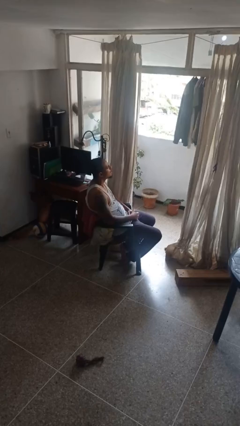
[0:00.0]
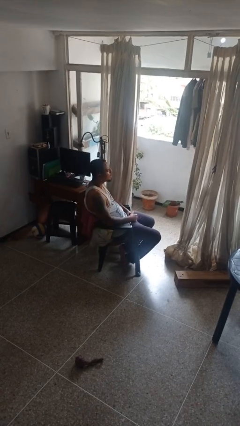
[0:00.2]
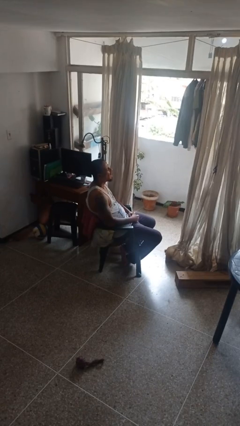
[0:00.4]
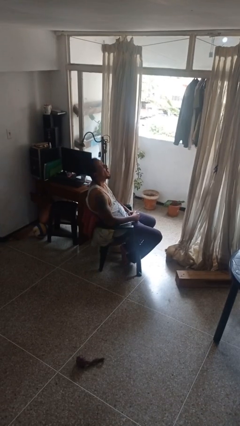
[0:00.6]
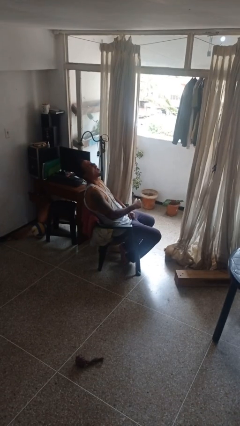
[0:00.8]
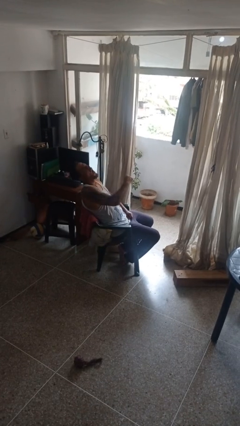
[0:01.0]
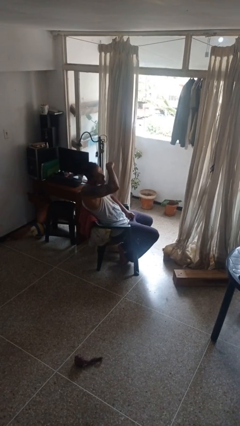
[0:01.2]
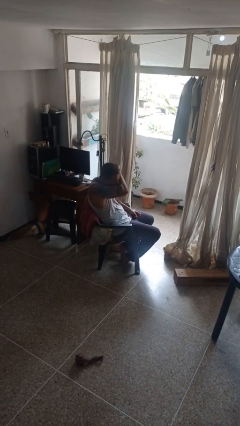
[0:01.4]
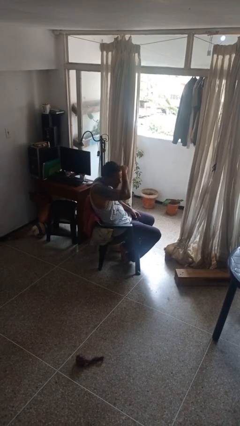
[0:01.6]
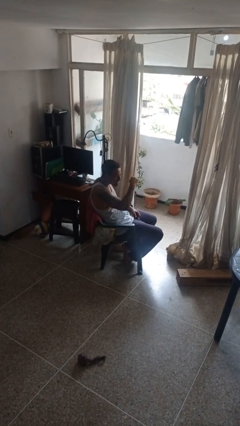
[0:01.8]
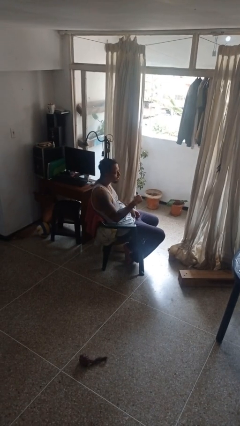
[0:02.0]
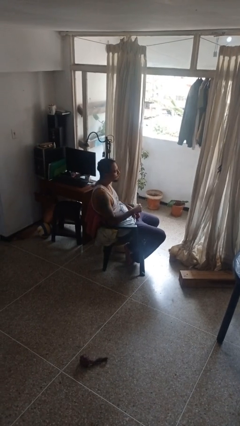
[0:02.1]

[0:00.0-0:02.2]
person sneezes into arm

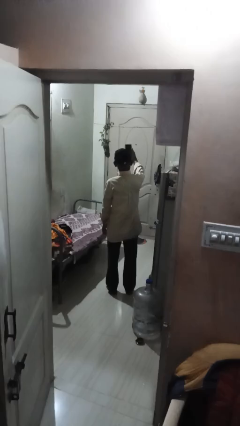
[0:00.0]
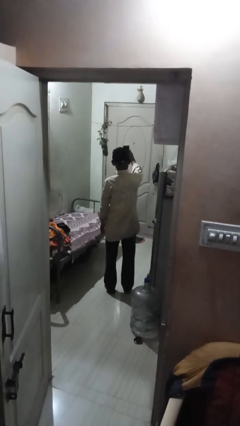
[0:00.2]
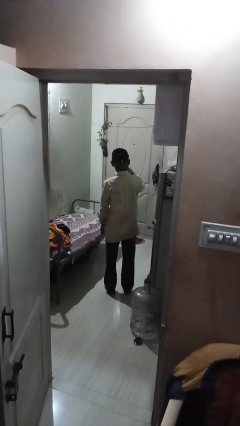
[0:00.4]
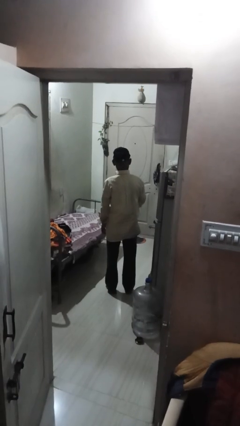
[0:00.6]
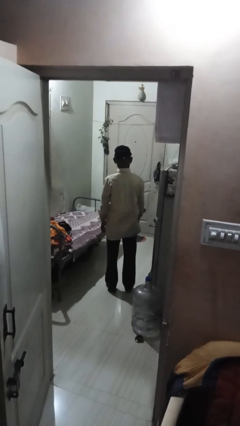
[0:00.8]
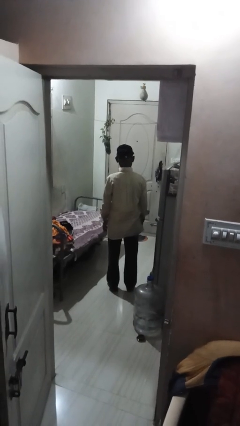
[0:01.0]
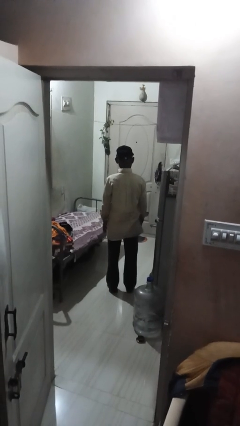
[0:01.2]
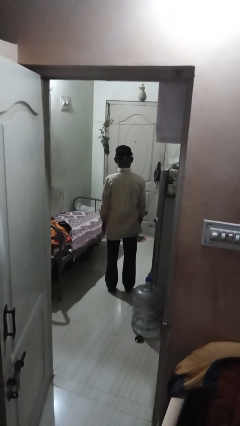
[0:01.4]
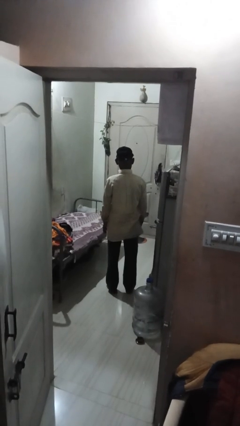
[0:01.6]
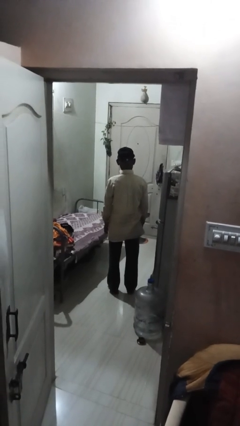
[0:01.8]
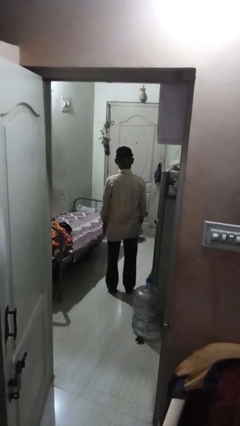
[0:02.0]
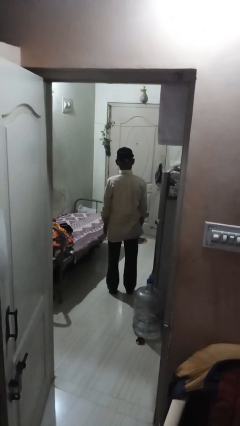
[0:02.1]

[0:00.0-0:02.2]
person takes selfie

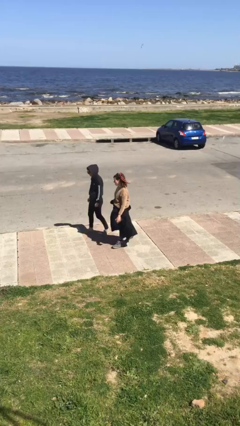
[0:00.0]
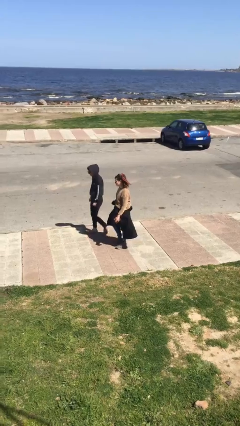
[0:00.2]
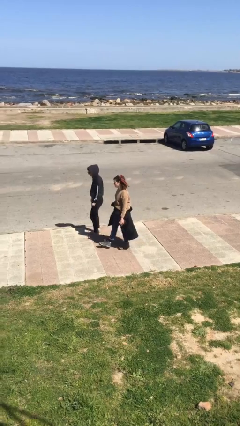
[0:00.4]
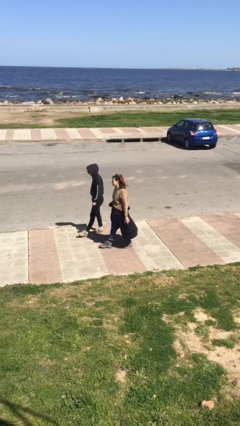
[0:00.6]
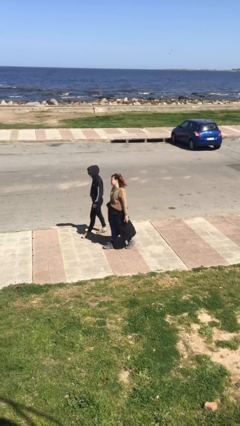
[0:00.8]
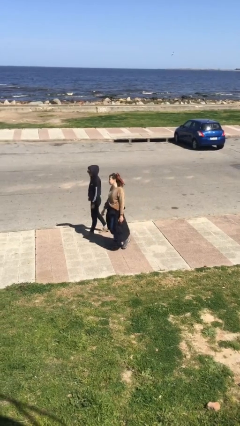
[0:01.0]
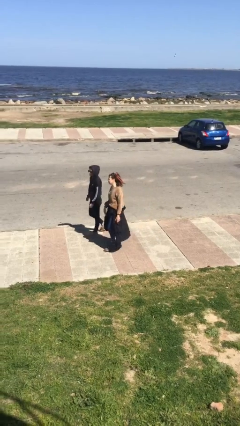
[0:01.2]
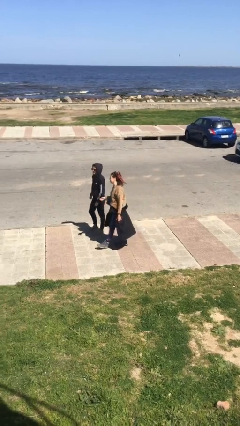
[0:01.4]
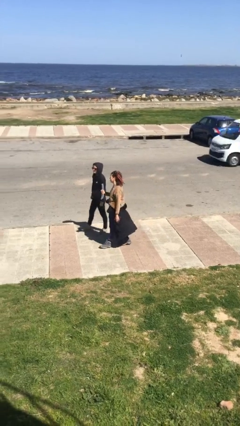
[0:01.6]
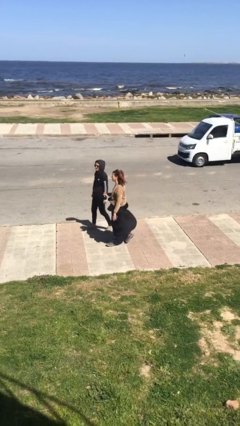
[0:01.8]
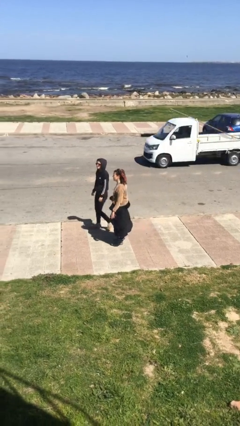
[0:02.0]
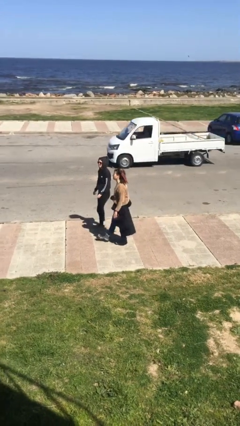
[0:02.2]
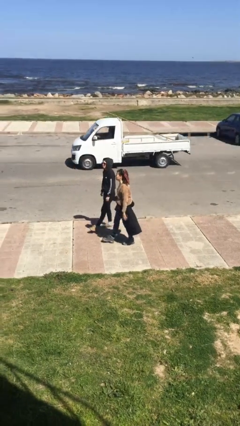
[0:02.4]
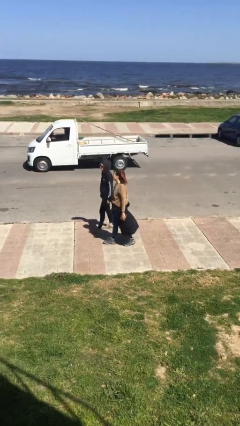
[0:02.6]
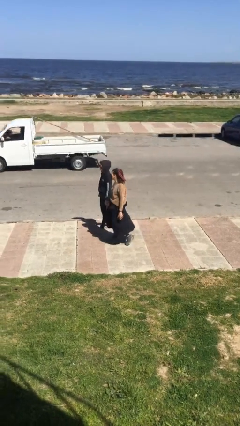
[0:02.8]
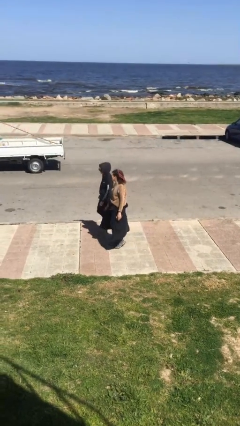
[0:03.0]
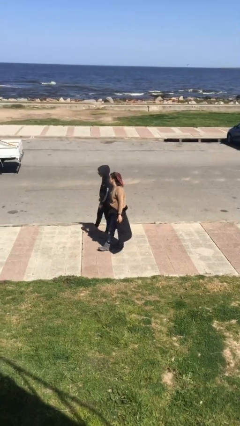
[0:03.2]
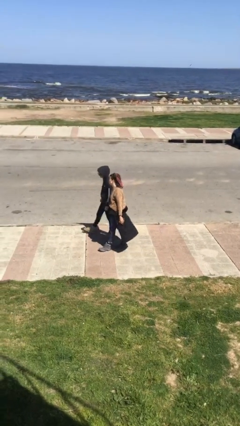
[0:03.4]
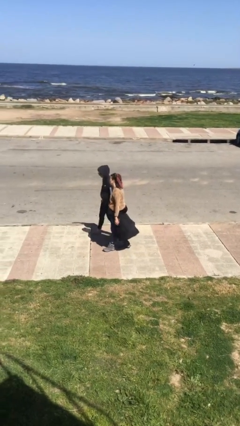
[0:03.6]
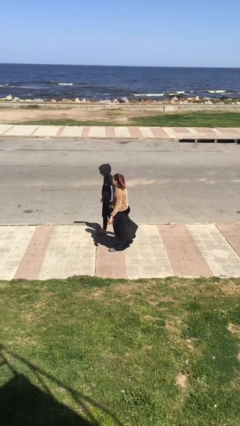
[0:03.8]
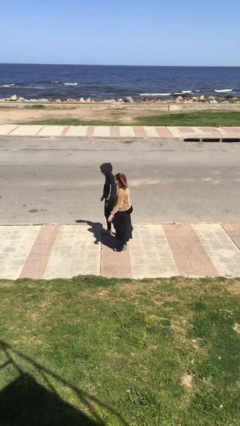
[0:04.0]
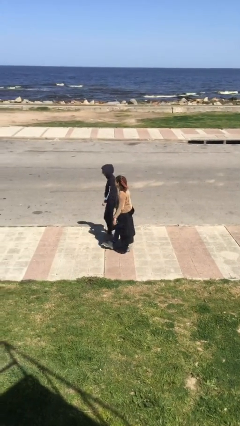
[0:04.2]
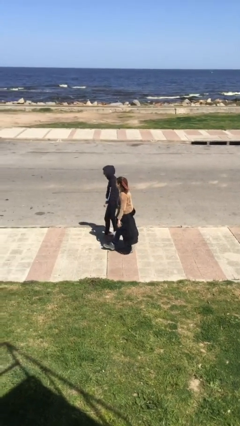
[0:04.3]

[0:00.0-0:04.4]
person talks to person

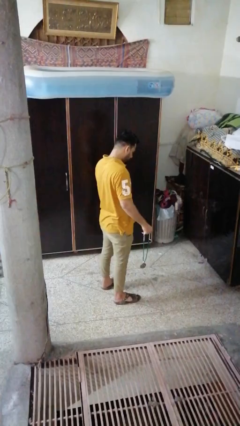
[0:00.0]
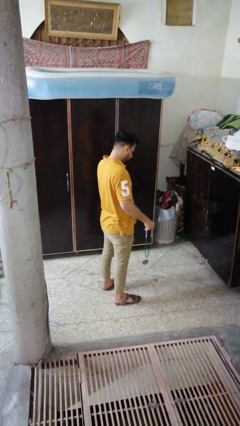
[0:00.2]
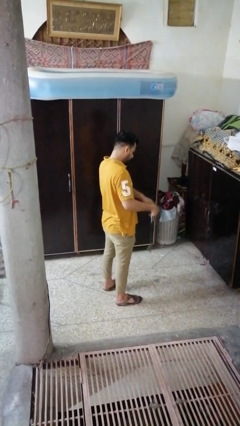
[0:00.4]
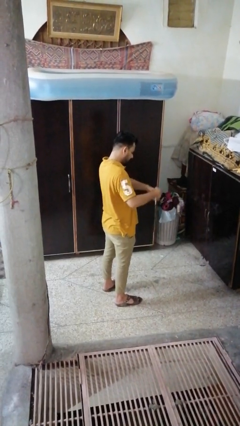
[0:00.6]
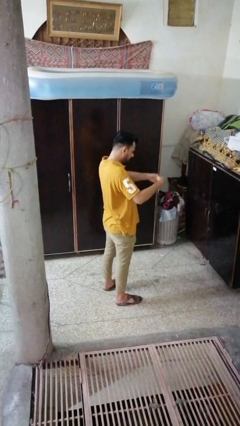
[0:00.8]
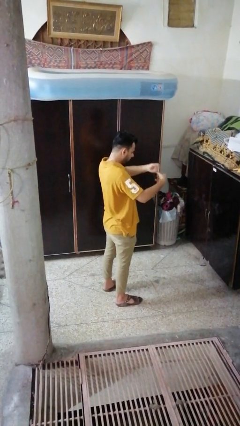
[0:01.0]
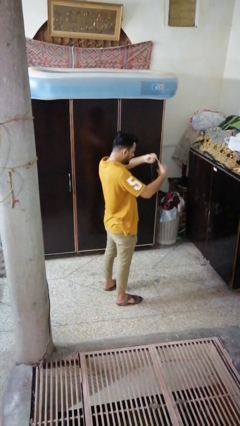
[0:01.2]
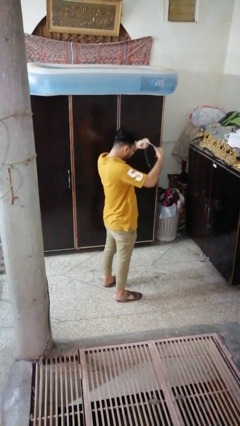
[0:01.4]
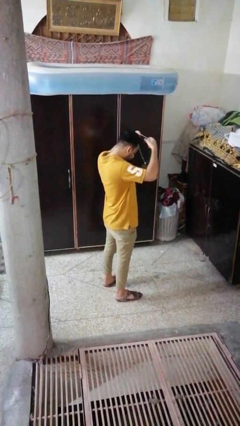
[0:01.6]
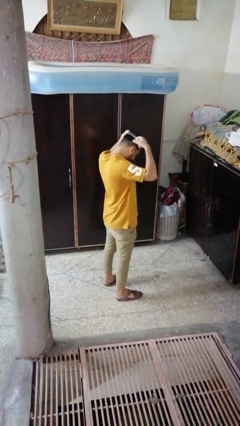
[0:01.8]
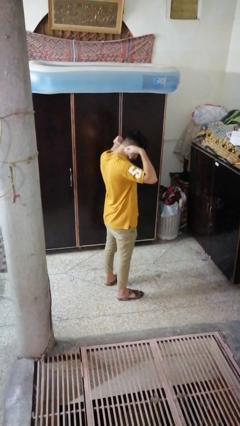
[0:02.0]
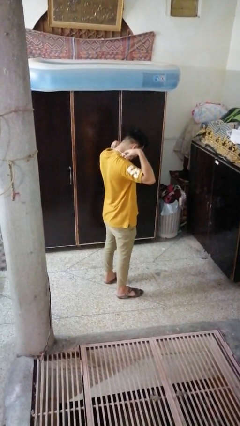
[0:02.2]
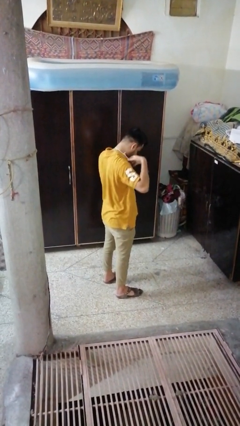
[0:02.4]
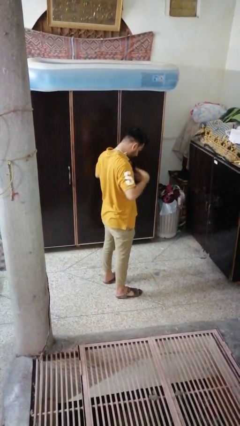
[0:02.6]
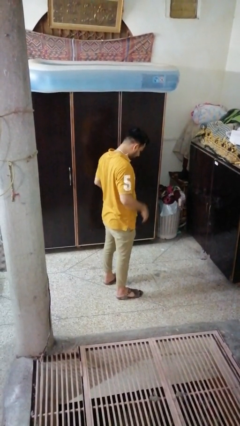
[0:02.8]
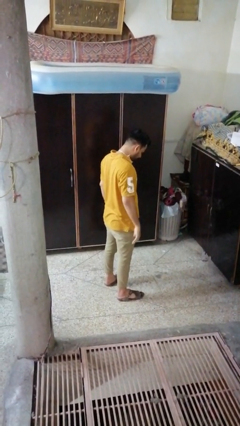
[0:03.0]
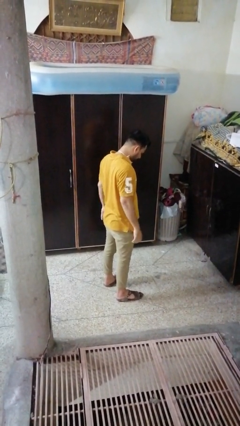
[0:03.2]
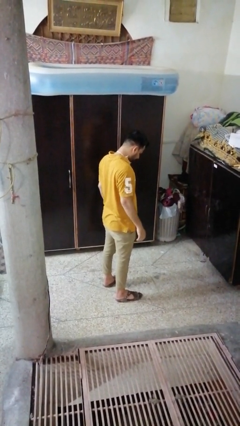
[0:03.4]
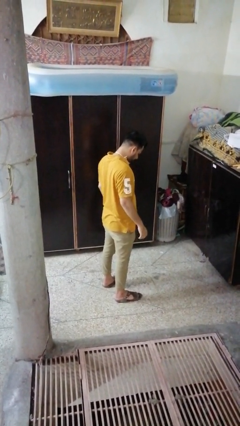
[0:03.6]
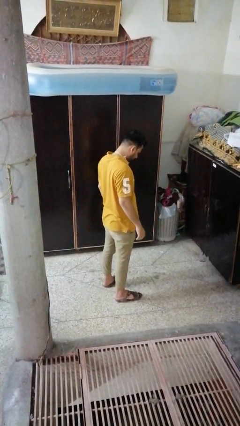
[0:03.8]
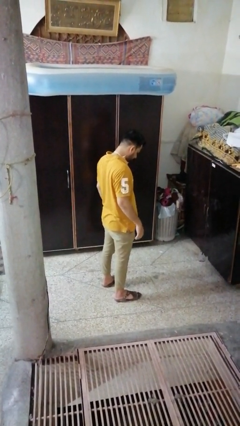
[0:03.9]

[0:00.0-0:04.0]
person puts on necklace

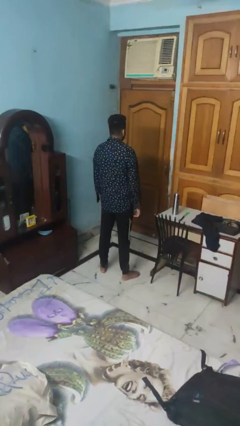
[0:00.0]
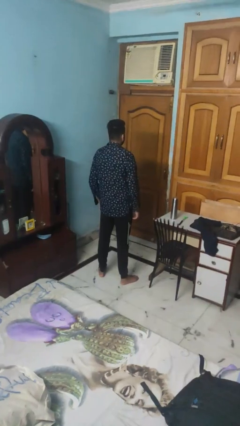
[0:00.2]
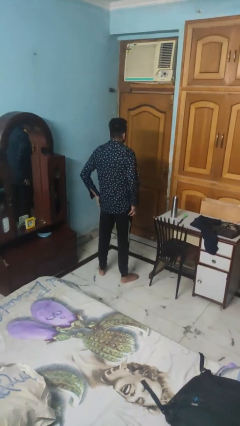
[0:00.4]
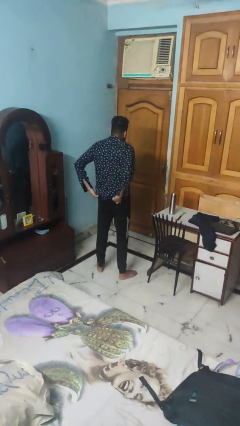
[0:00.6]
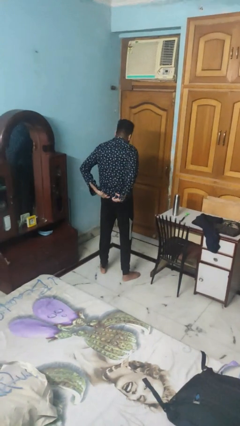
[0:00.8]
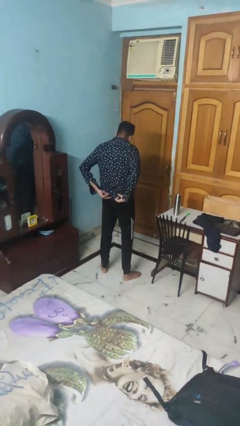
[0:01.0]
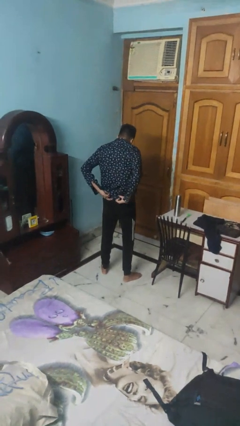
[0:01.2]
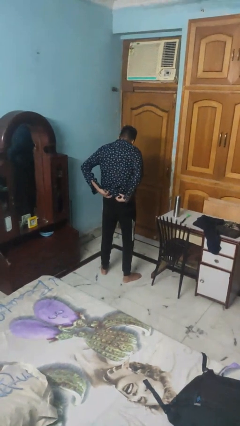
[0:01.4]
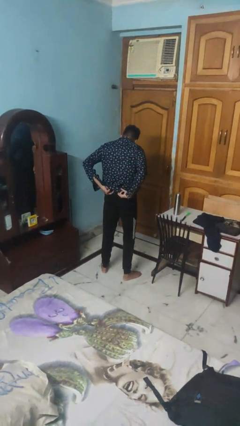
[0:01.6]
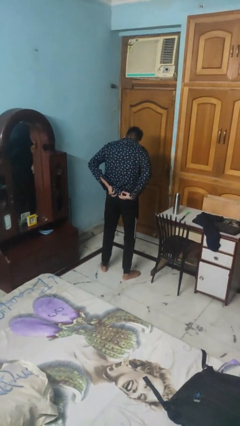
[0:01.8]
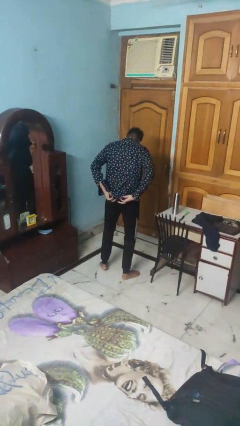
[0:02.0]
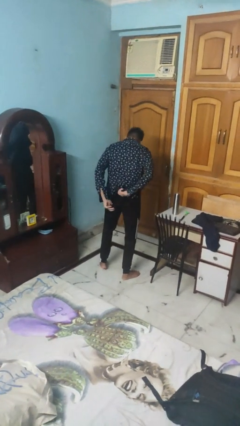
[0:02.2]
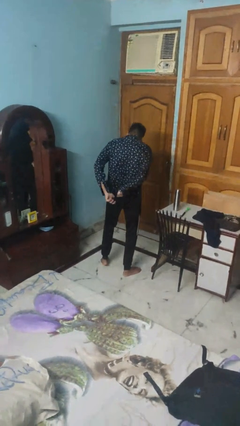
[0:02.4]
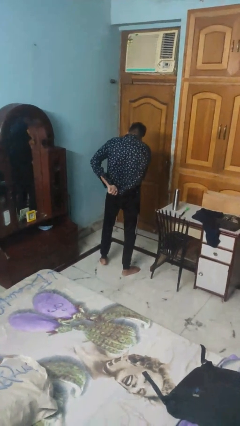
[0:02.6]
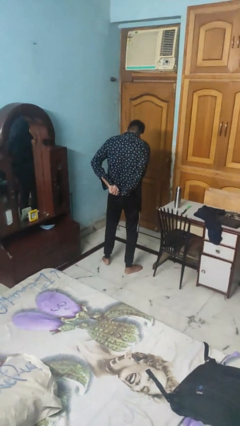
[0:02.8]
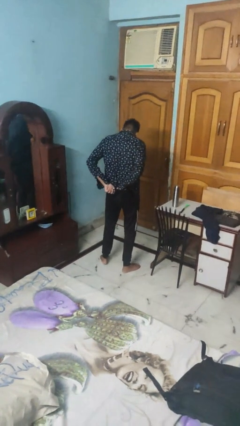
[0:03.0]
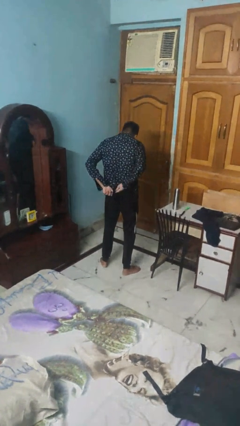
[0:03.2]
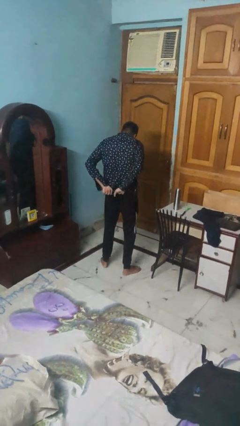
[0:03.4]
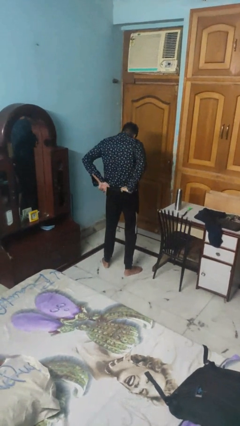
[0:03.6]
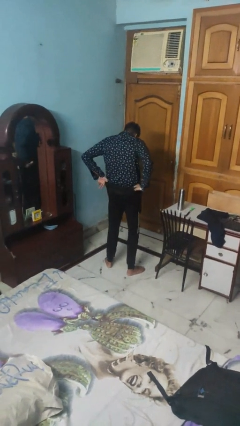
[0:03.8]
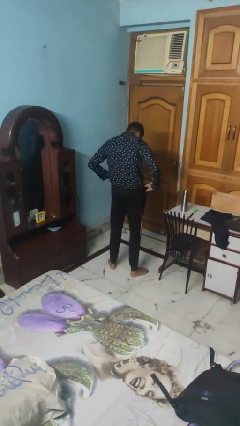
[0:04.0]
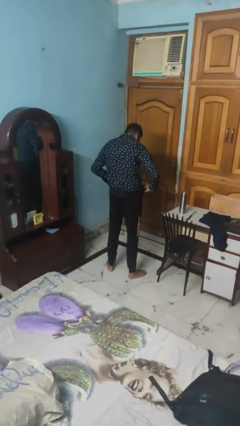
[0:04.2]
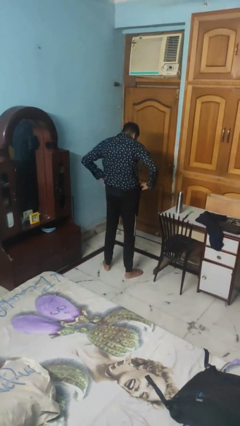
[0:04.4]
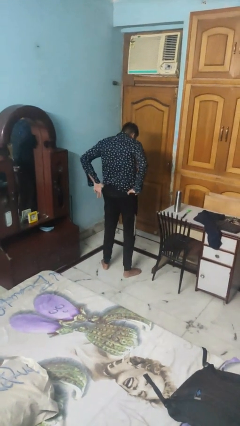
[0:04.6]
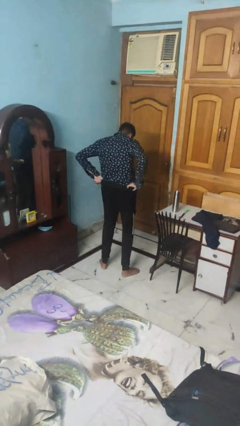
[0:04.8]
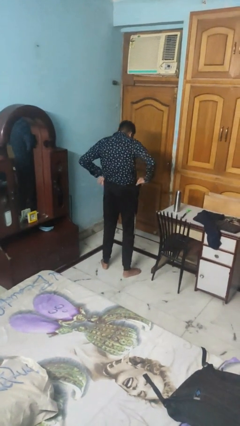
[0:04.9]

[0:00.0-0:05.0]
person tucks in shirt
